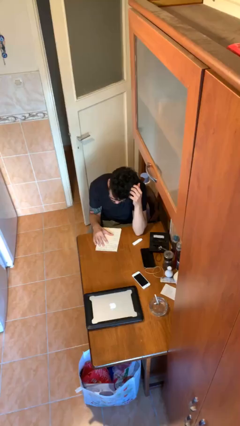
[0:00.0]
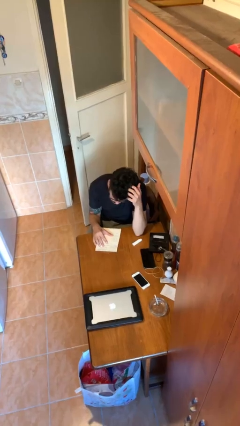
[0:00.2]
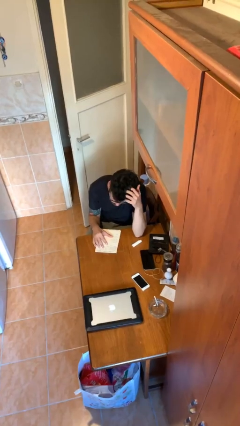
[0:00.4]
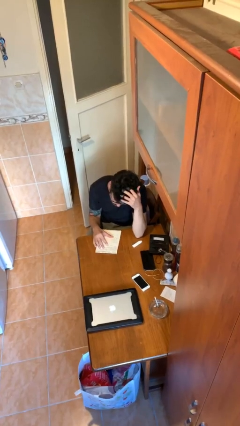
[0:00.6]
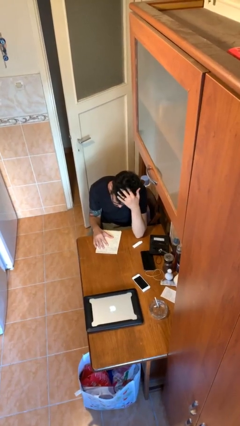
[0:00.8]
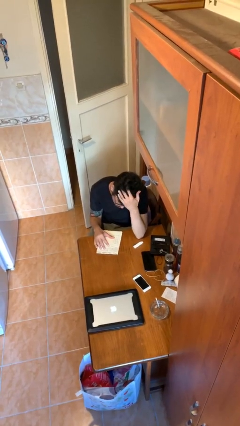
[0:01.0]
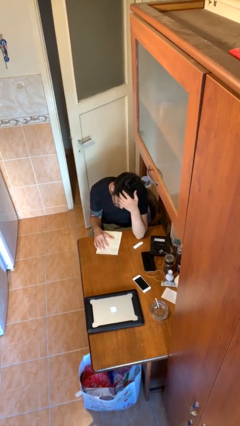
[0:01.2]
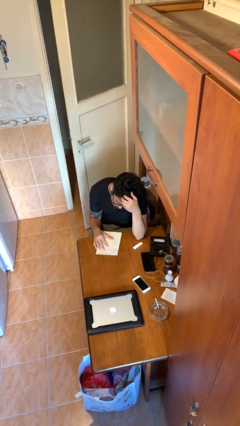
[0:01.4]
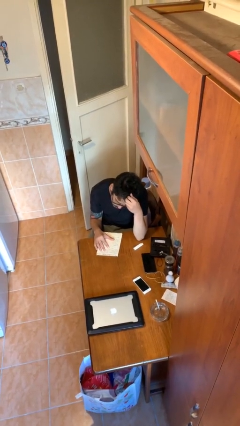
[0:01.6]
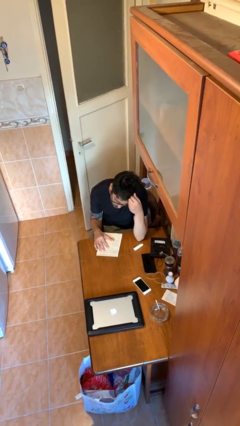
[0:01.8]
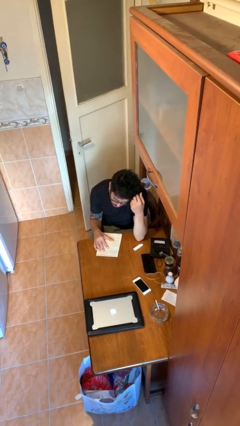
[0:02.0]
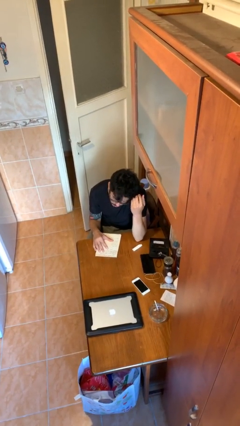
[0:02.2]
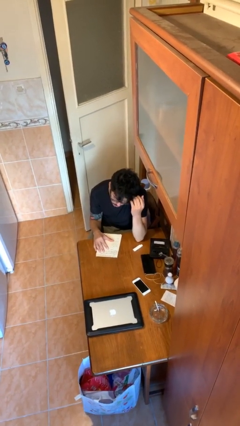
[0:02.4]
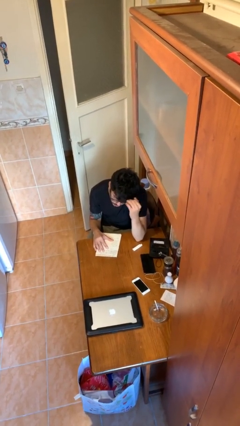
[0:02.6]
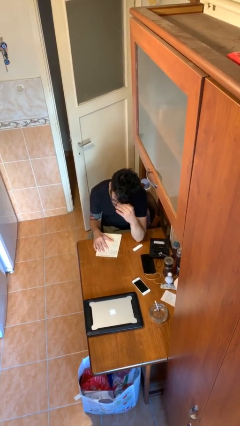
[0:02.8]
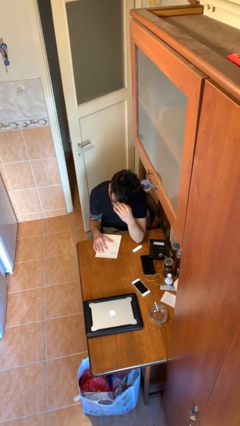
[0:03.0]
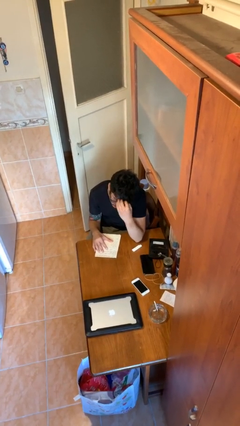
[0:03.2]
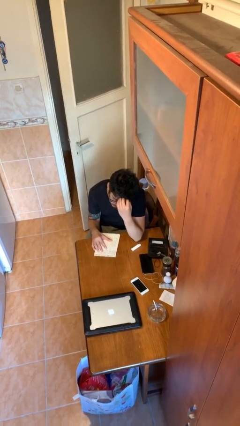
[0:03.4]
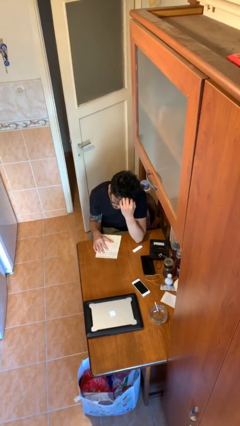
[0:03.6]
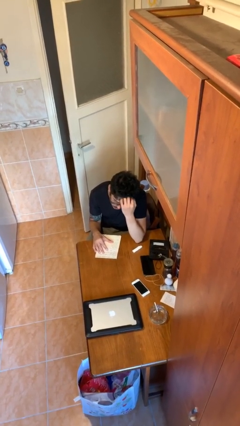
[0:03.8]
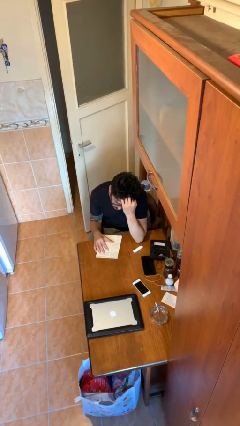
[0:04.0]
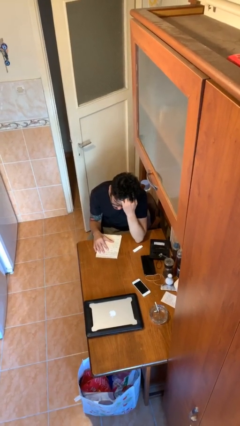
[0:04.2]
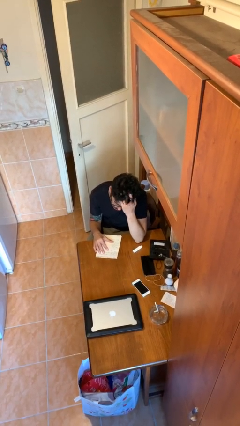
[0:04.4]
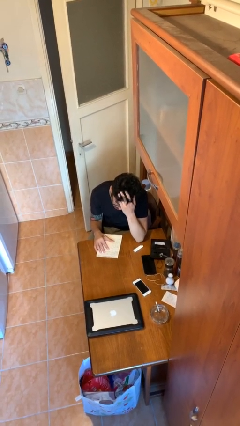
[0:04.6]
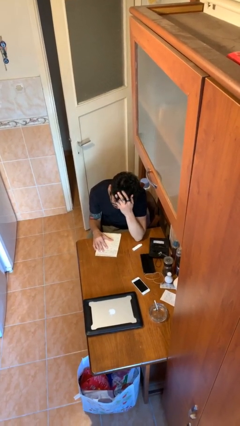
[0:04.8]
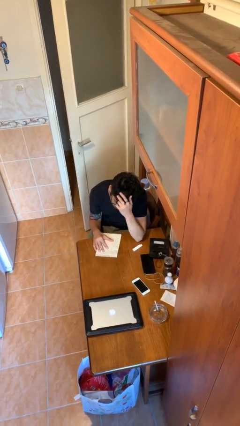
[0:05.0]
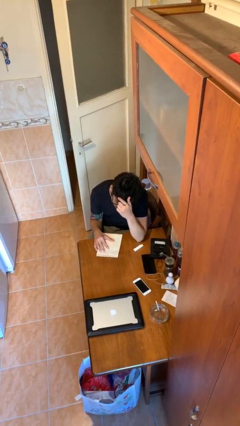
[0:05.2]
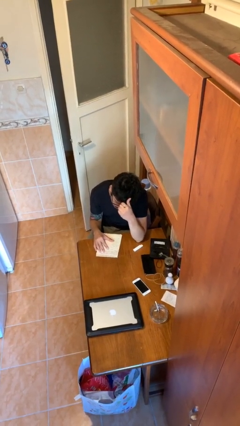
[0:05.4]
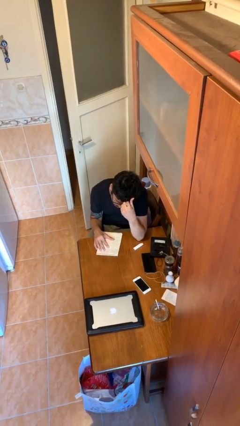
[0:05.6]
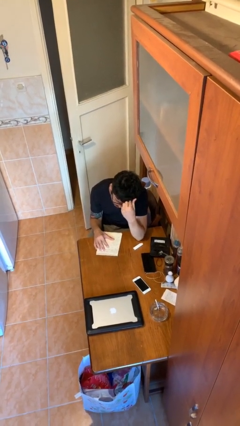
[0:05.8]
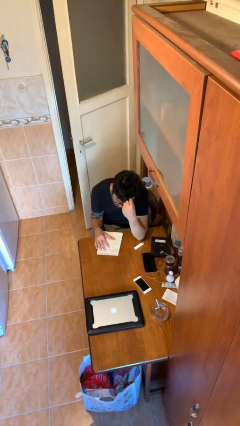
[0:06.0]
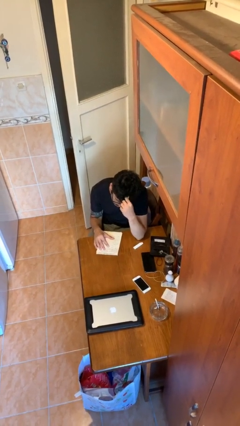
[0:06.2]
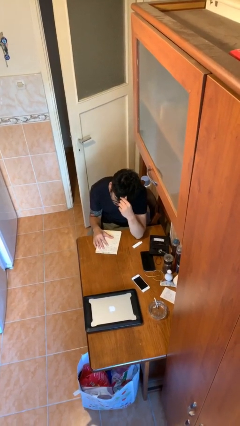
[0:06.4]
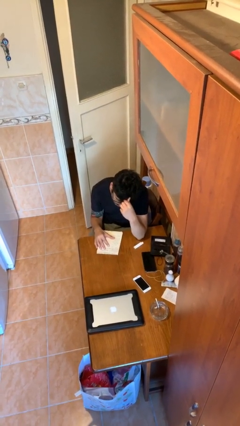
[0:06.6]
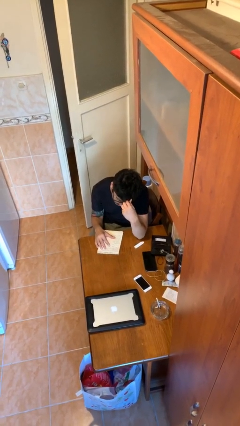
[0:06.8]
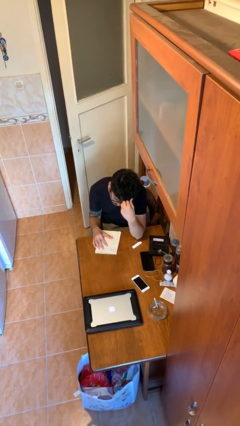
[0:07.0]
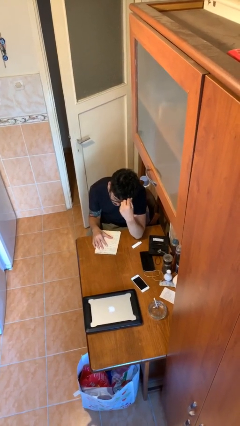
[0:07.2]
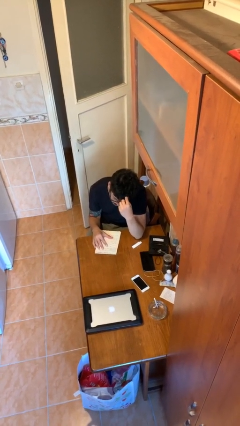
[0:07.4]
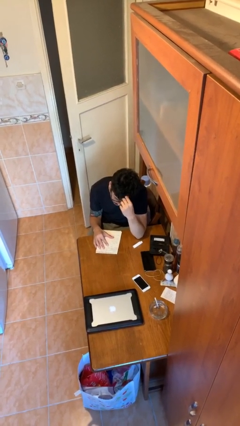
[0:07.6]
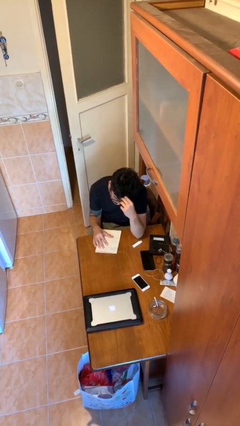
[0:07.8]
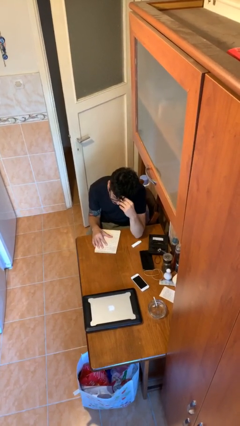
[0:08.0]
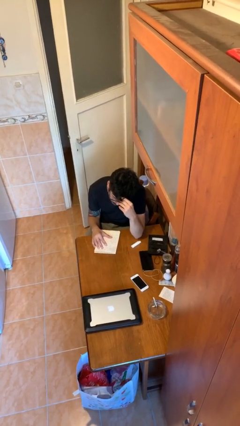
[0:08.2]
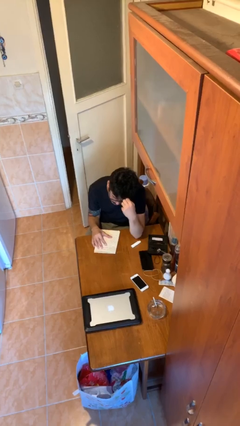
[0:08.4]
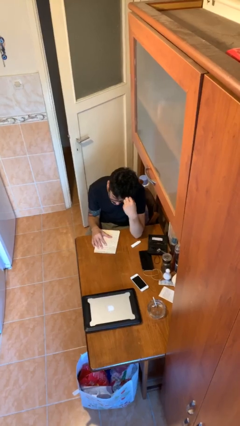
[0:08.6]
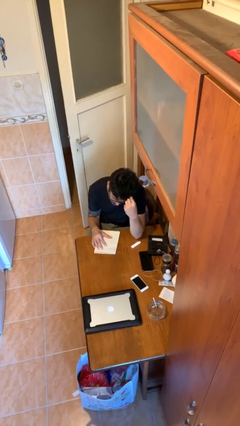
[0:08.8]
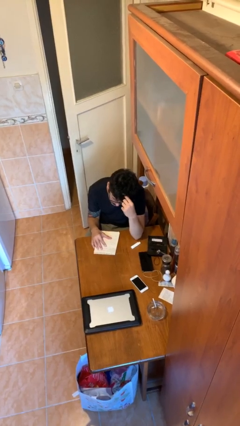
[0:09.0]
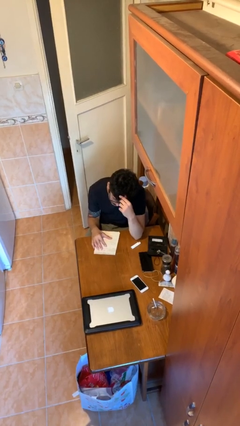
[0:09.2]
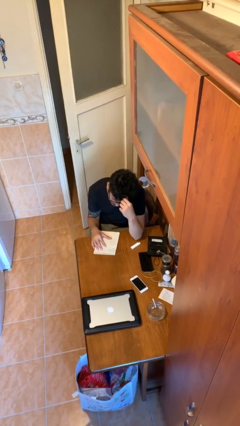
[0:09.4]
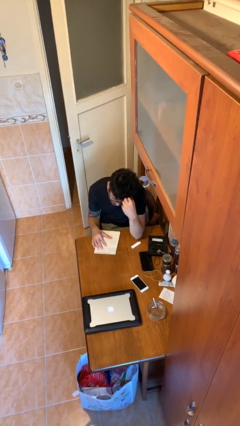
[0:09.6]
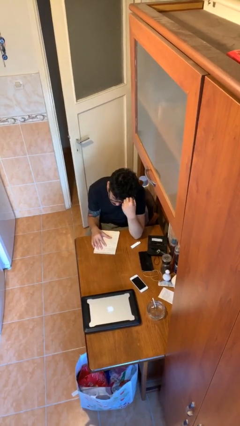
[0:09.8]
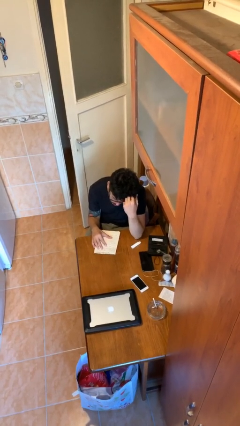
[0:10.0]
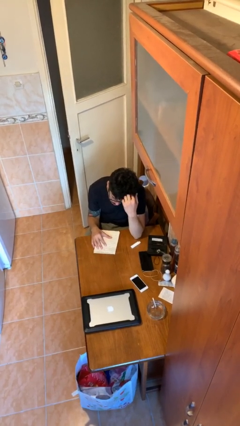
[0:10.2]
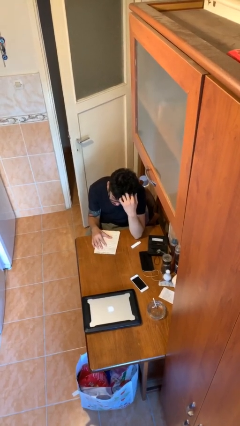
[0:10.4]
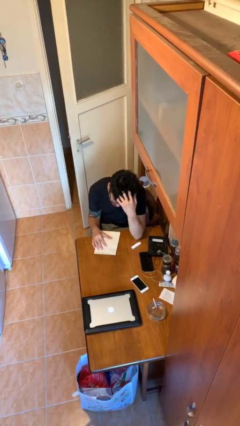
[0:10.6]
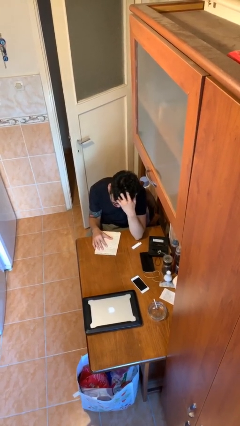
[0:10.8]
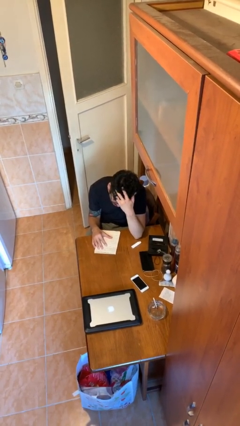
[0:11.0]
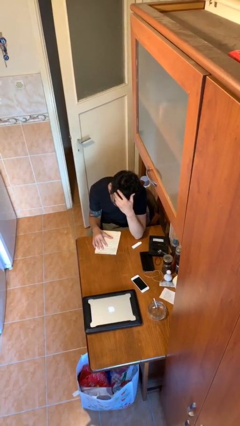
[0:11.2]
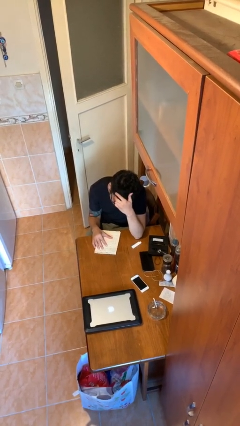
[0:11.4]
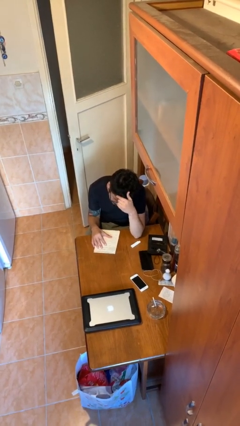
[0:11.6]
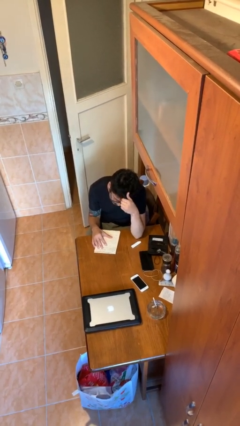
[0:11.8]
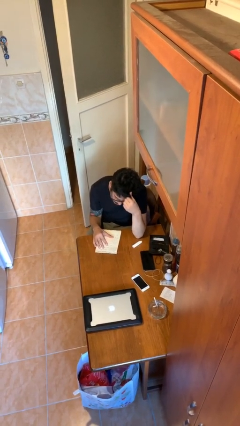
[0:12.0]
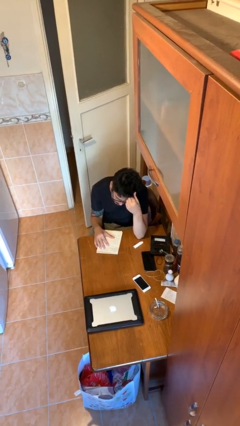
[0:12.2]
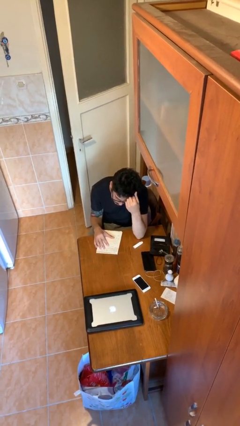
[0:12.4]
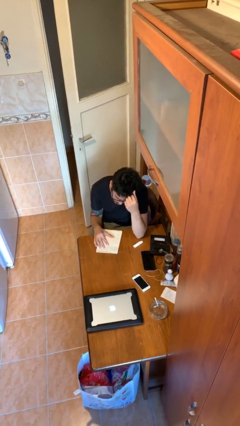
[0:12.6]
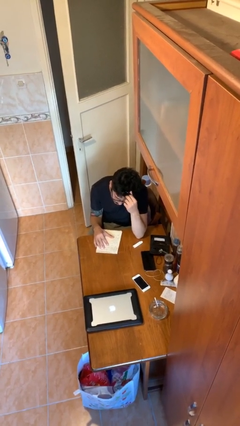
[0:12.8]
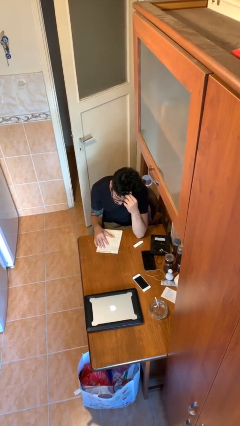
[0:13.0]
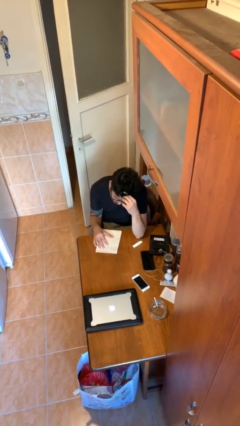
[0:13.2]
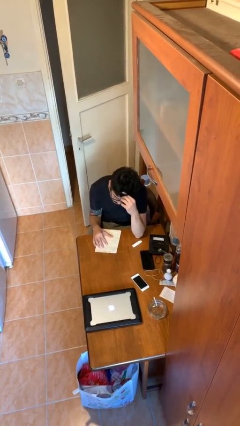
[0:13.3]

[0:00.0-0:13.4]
person reads document

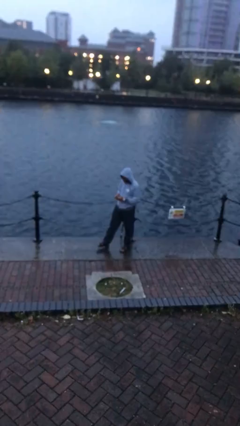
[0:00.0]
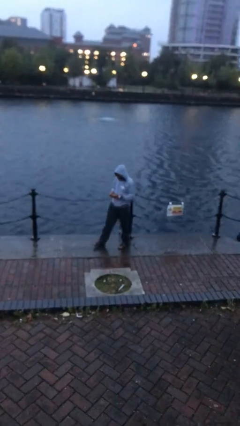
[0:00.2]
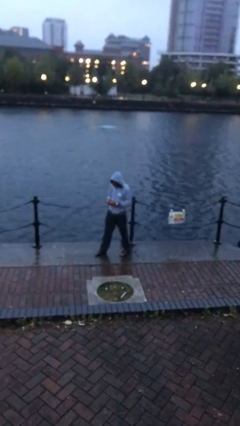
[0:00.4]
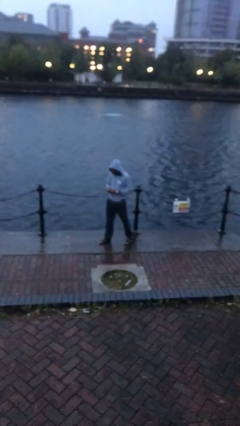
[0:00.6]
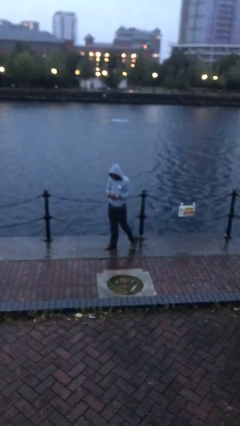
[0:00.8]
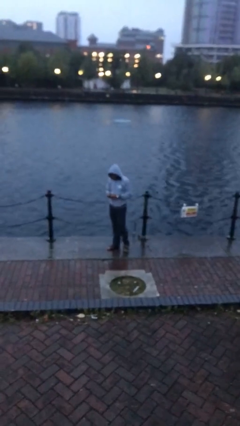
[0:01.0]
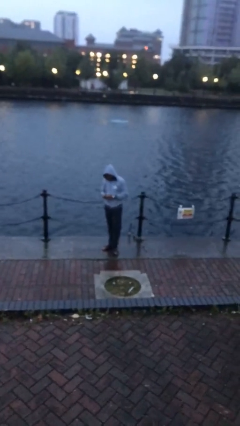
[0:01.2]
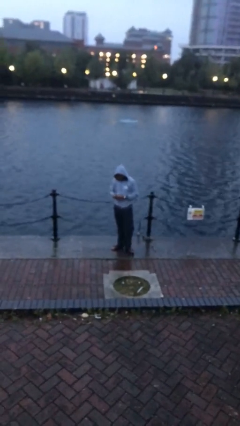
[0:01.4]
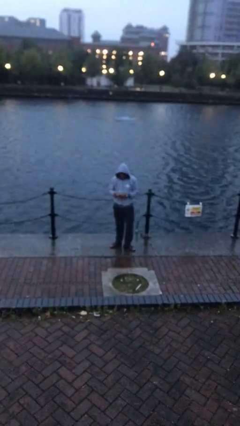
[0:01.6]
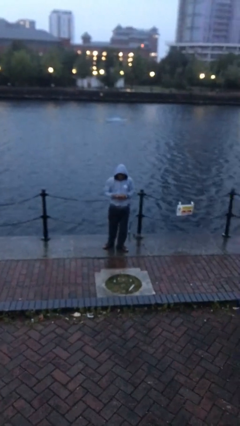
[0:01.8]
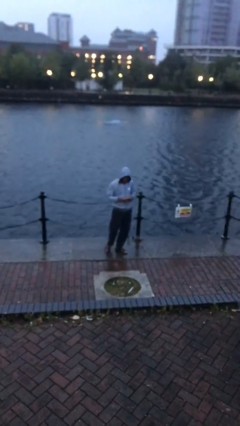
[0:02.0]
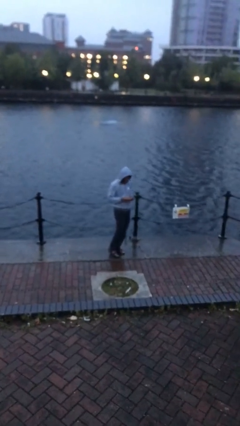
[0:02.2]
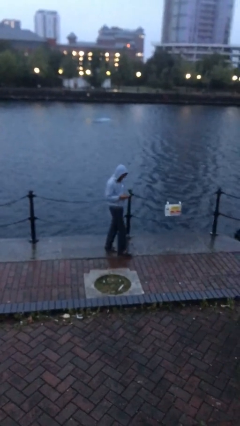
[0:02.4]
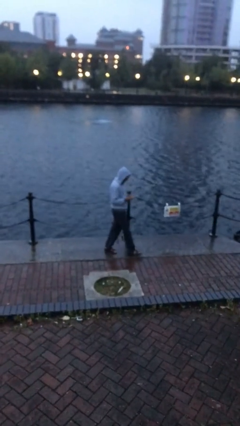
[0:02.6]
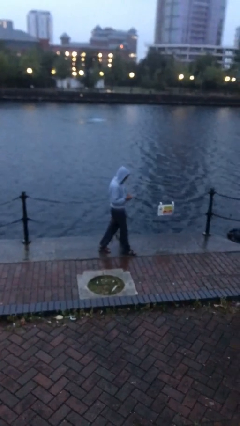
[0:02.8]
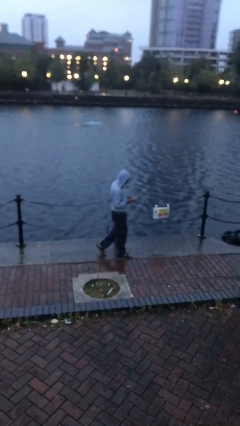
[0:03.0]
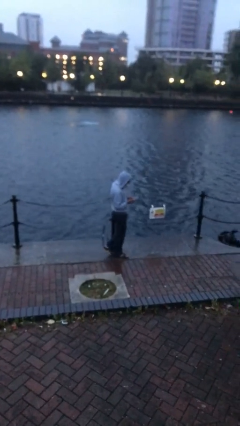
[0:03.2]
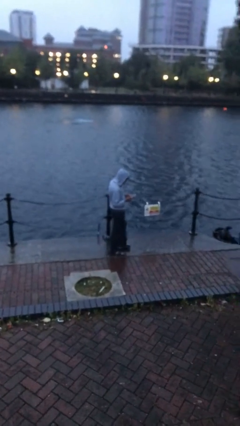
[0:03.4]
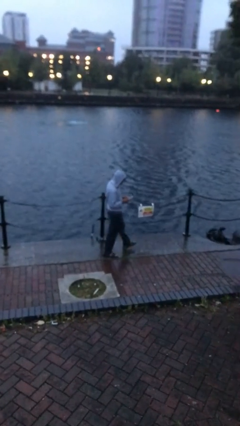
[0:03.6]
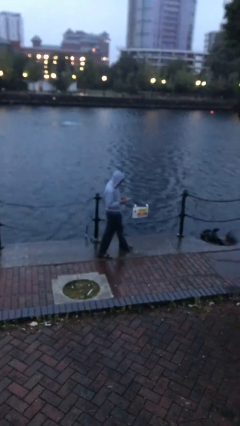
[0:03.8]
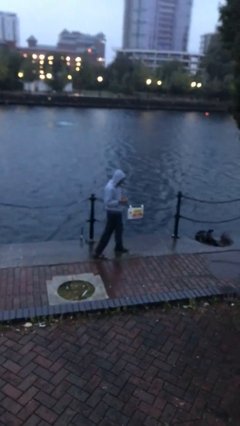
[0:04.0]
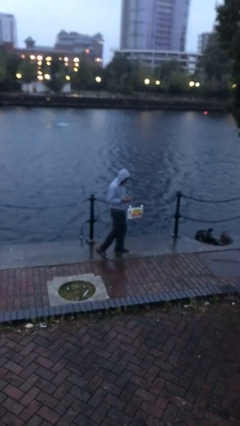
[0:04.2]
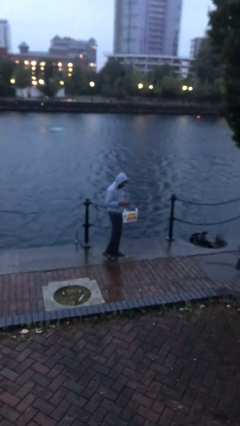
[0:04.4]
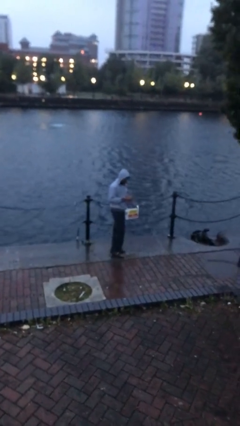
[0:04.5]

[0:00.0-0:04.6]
person texts on phone
